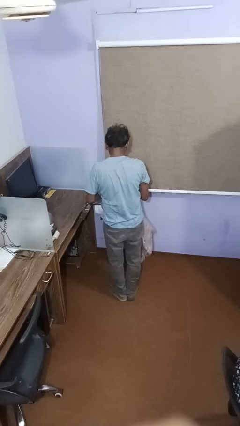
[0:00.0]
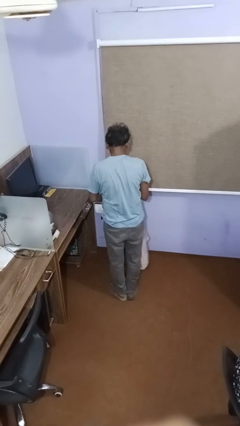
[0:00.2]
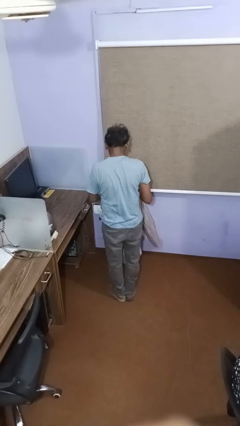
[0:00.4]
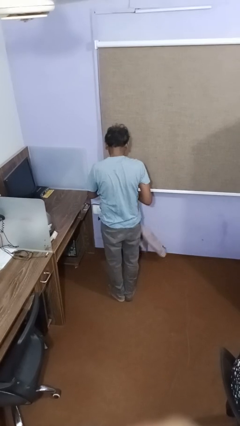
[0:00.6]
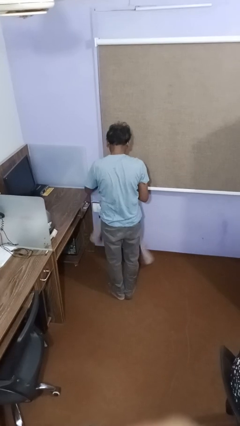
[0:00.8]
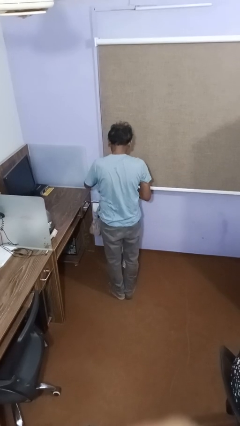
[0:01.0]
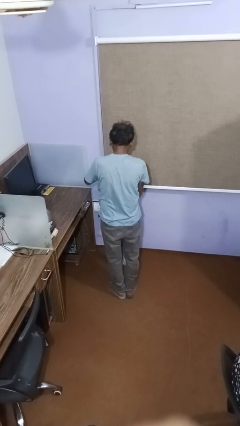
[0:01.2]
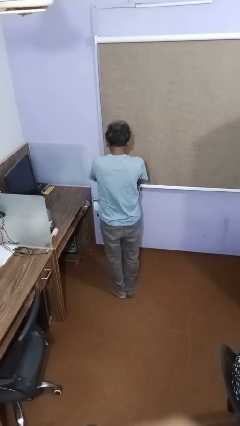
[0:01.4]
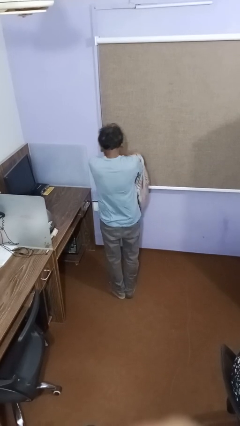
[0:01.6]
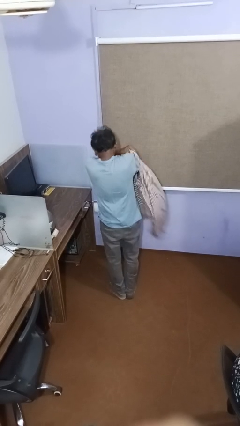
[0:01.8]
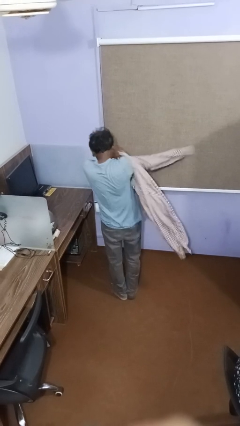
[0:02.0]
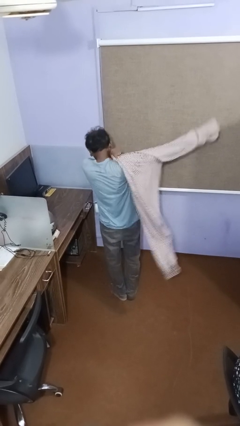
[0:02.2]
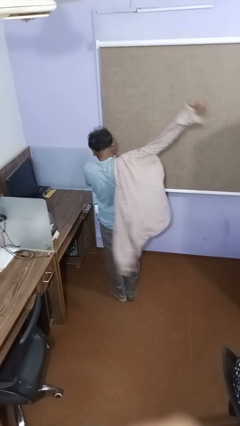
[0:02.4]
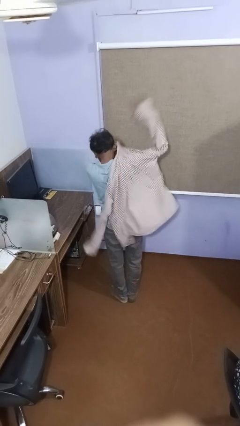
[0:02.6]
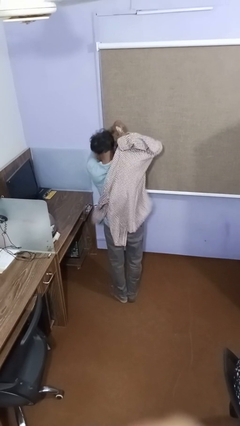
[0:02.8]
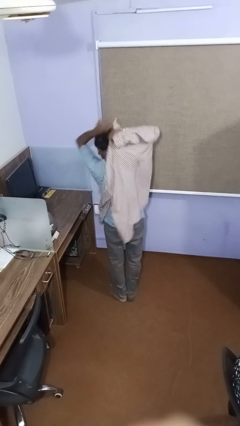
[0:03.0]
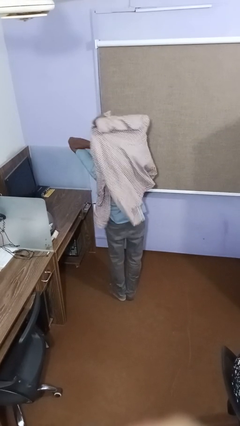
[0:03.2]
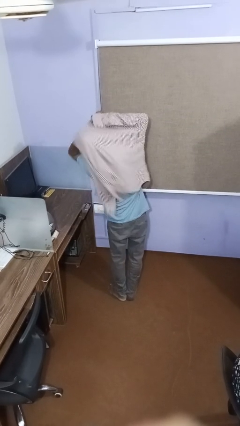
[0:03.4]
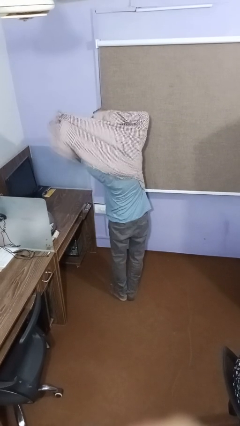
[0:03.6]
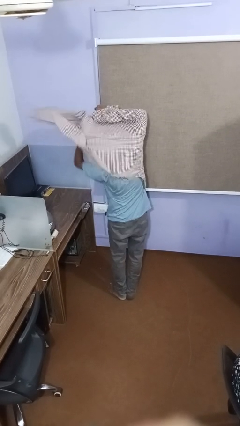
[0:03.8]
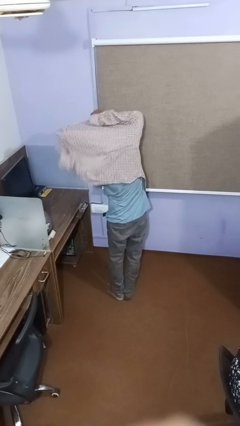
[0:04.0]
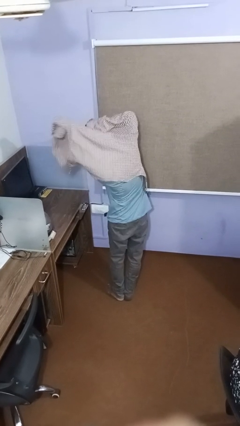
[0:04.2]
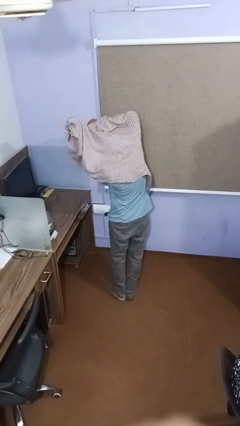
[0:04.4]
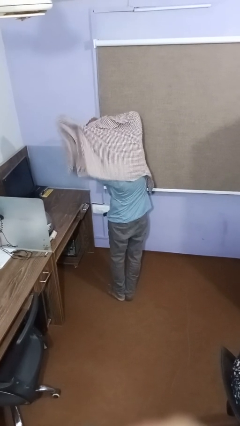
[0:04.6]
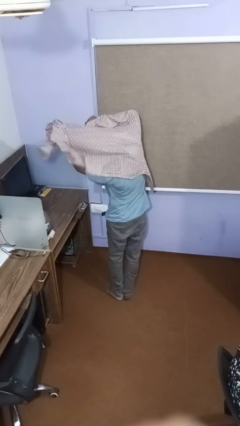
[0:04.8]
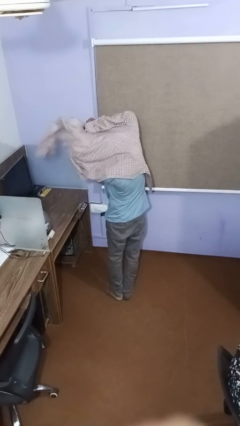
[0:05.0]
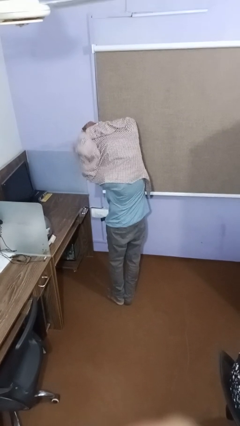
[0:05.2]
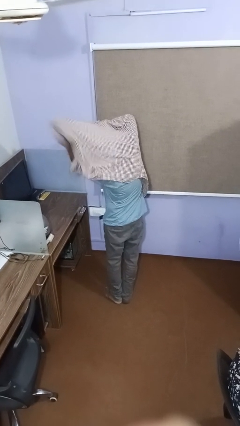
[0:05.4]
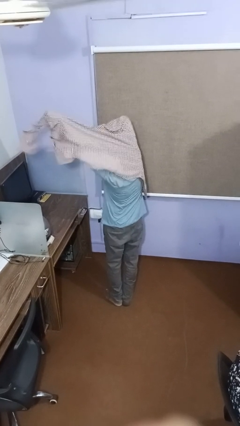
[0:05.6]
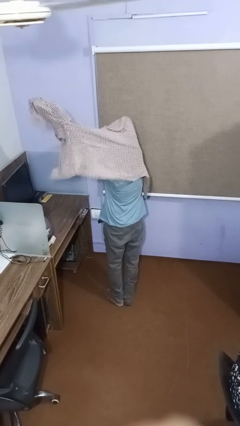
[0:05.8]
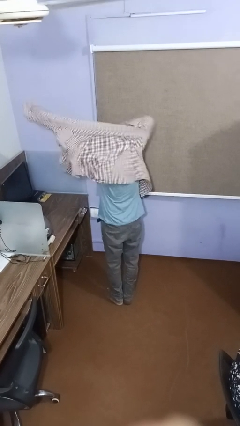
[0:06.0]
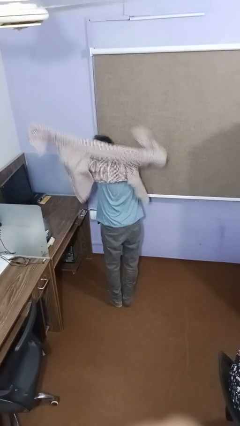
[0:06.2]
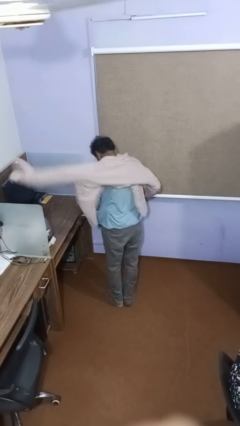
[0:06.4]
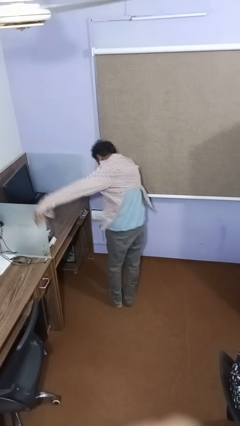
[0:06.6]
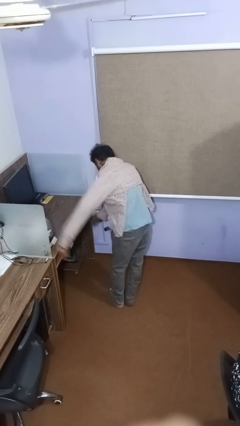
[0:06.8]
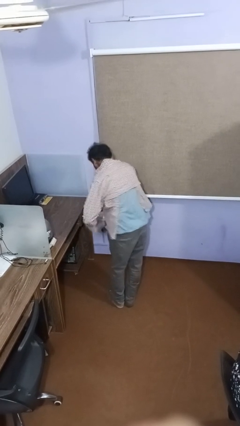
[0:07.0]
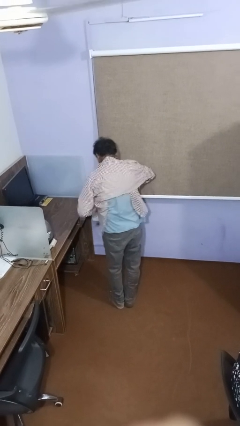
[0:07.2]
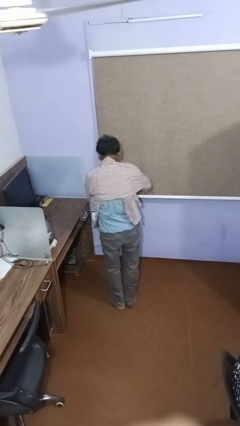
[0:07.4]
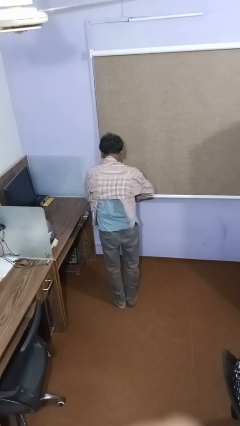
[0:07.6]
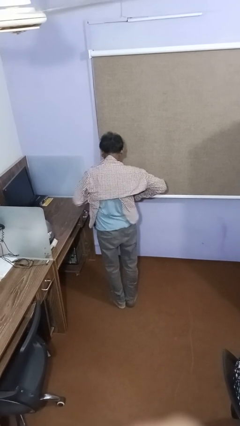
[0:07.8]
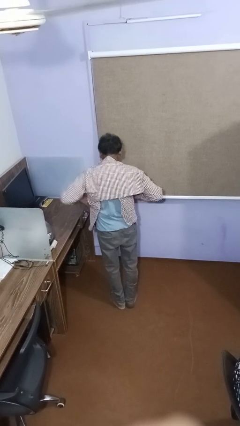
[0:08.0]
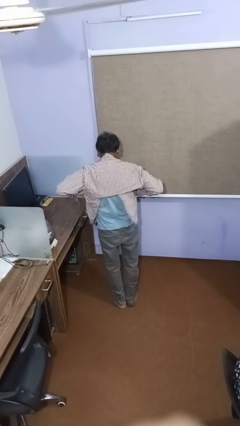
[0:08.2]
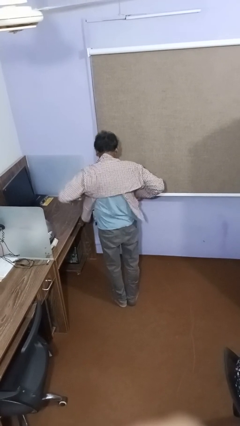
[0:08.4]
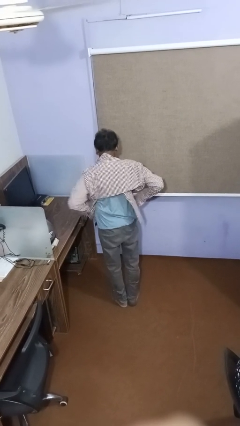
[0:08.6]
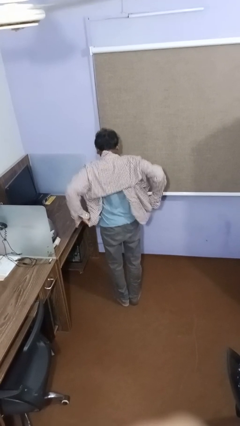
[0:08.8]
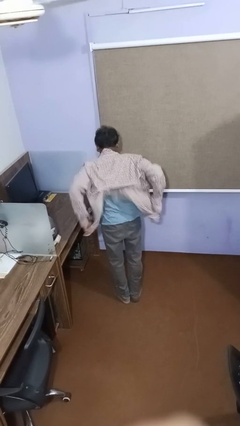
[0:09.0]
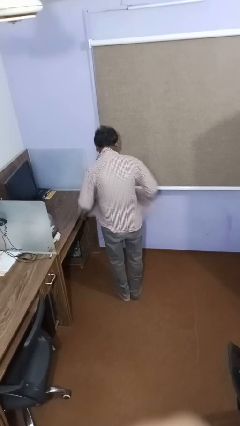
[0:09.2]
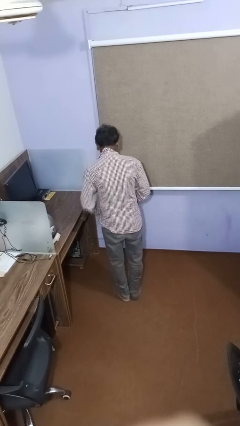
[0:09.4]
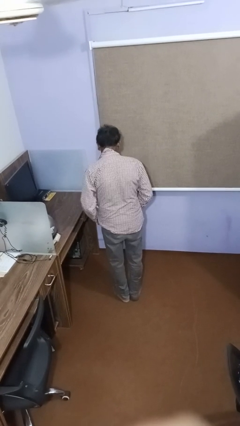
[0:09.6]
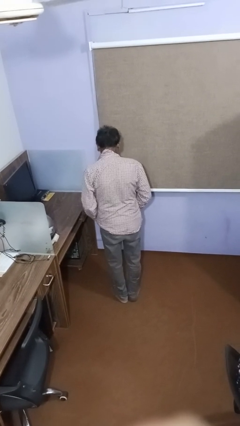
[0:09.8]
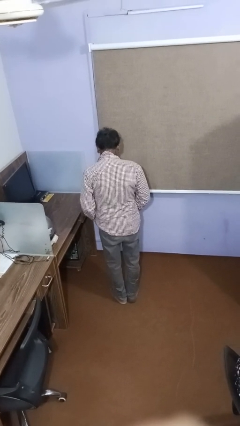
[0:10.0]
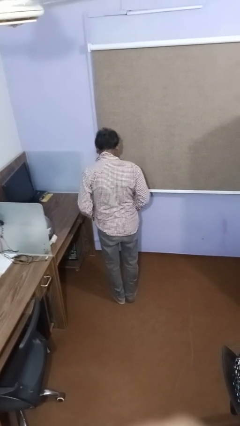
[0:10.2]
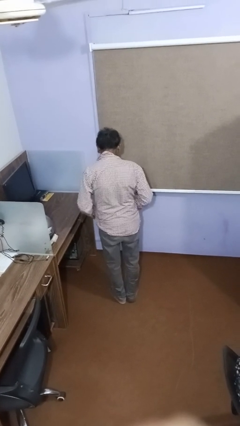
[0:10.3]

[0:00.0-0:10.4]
person puts on shirt

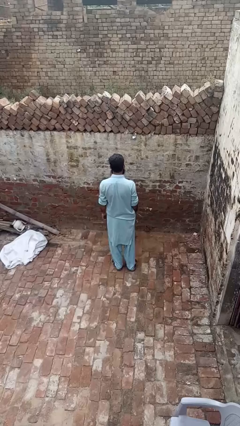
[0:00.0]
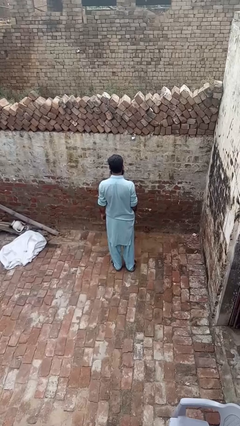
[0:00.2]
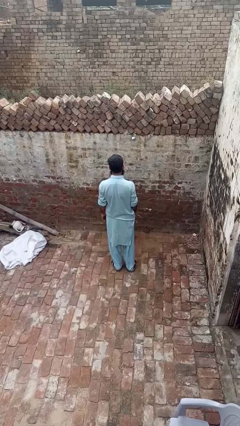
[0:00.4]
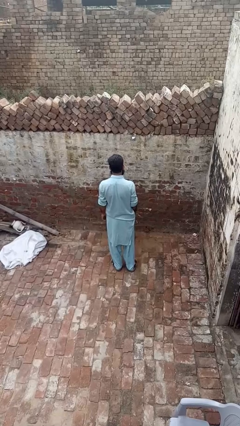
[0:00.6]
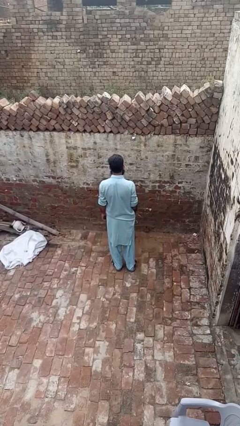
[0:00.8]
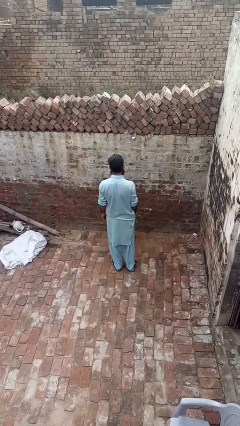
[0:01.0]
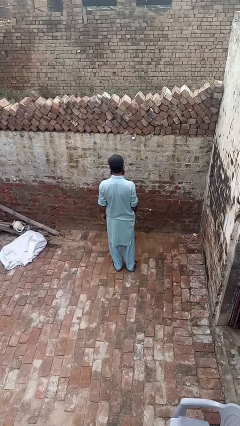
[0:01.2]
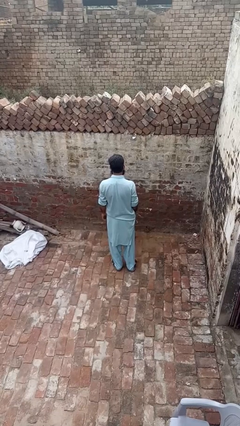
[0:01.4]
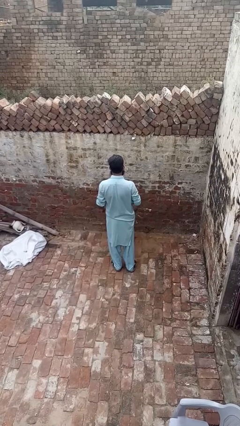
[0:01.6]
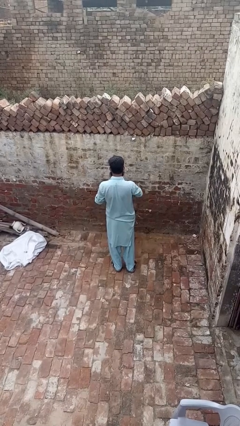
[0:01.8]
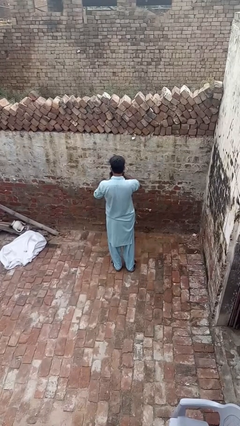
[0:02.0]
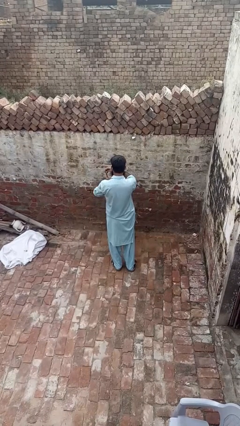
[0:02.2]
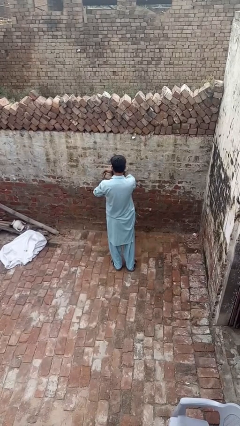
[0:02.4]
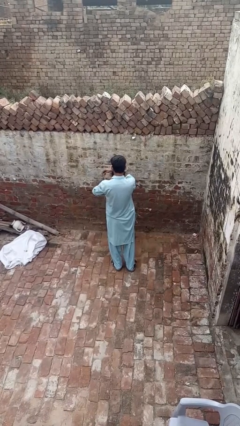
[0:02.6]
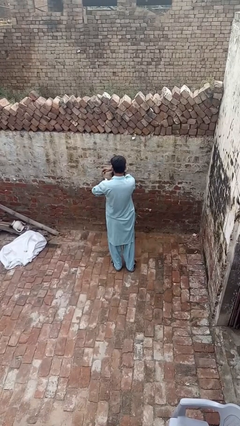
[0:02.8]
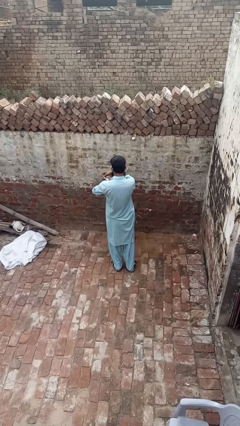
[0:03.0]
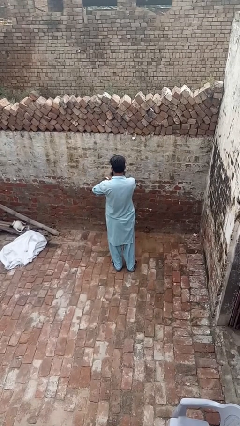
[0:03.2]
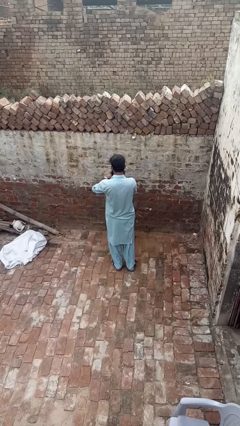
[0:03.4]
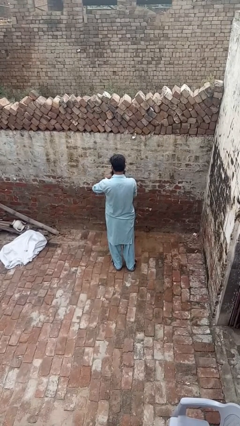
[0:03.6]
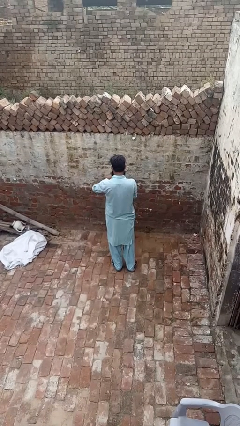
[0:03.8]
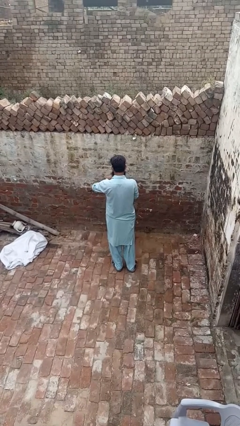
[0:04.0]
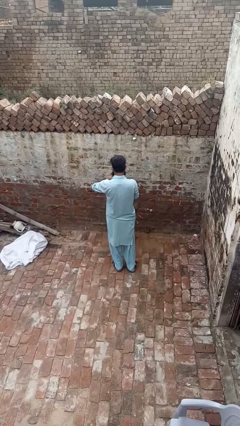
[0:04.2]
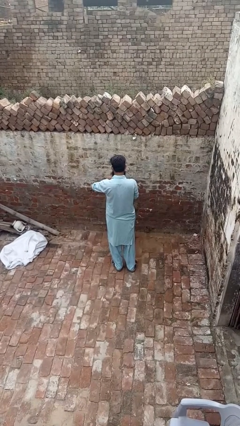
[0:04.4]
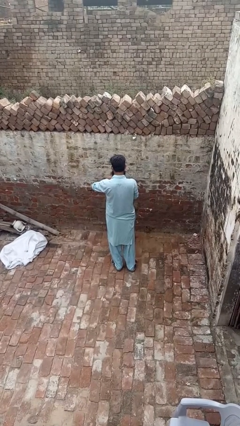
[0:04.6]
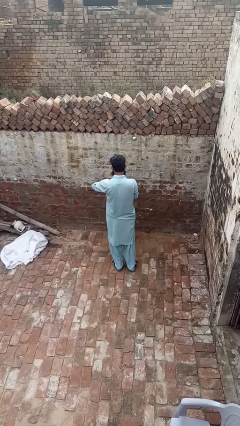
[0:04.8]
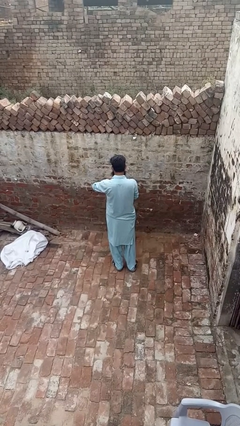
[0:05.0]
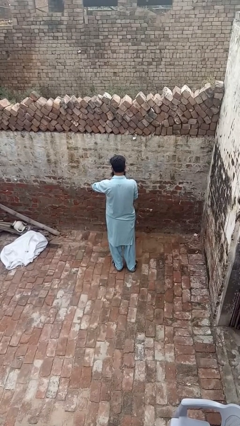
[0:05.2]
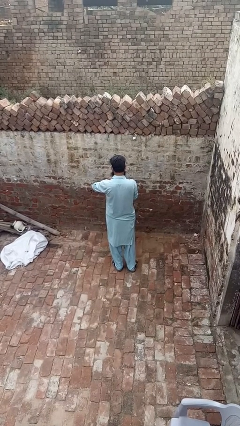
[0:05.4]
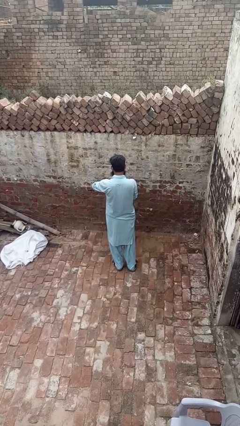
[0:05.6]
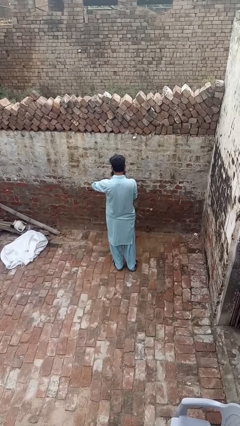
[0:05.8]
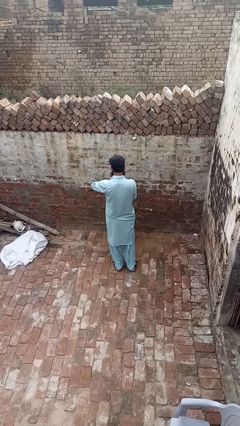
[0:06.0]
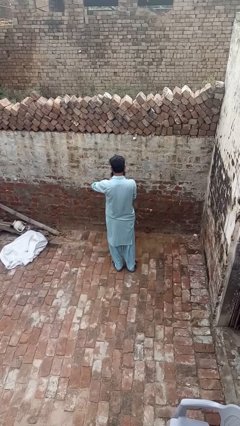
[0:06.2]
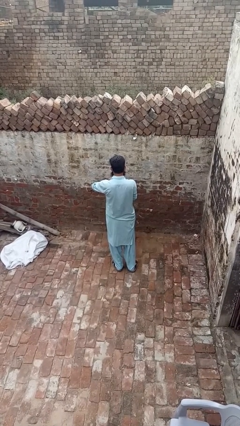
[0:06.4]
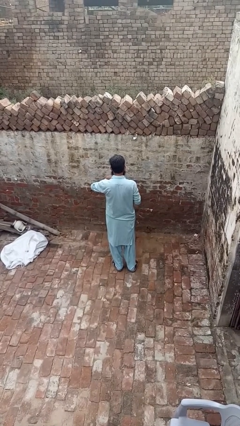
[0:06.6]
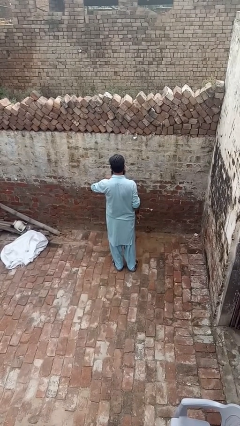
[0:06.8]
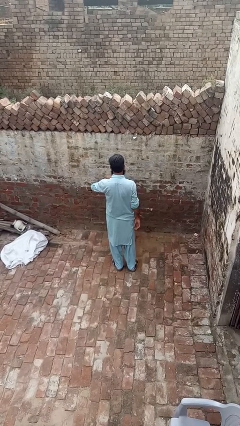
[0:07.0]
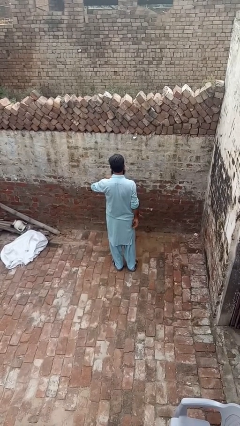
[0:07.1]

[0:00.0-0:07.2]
person puts on wristwatch

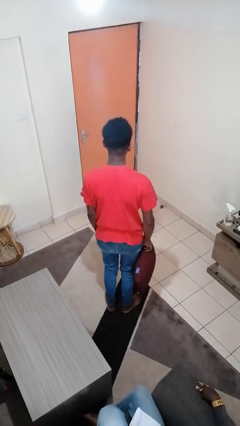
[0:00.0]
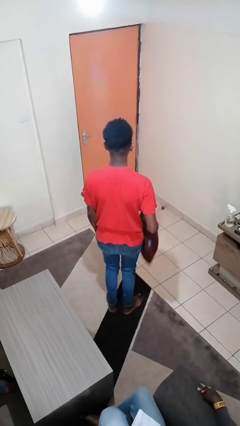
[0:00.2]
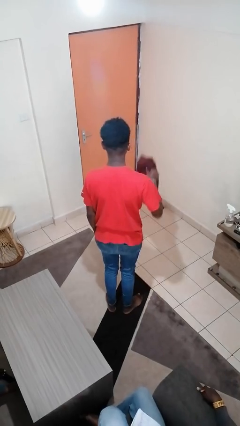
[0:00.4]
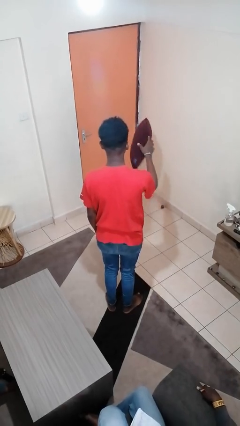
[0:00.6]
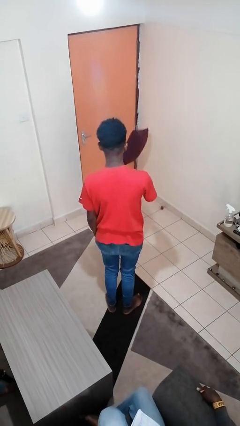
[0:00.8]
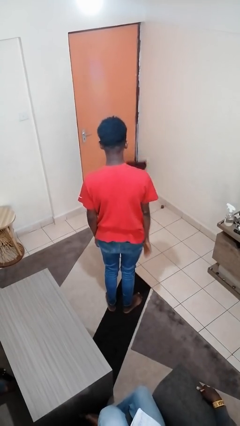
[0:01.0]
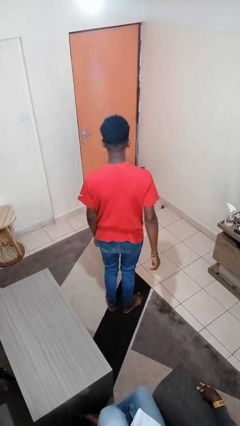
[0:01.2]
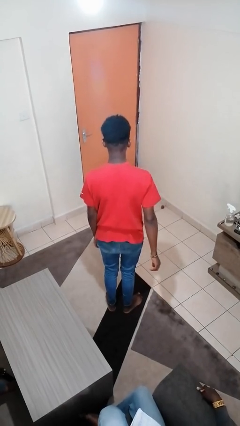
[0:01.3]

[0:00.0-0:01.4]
person throws object to ground
